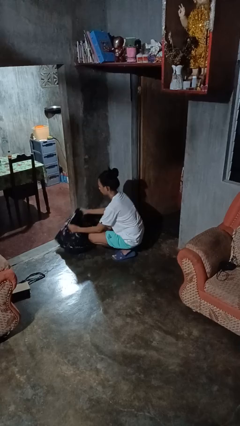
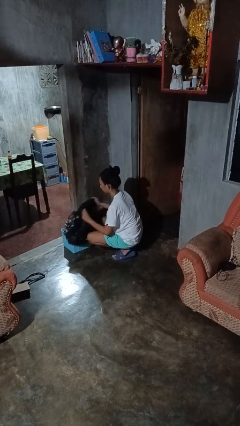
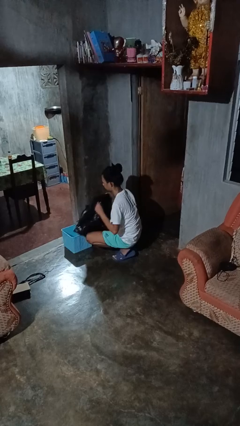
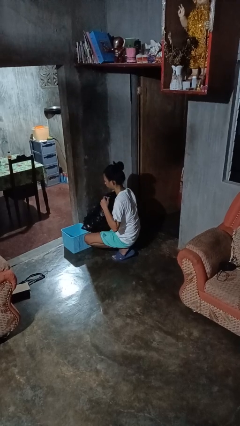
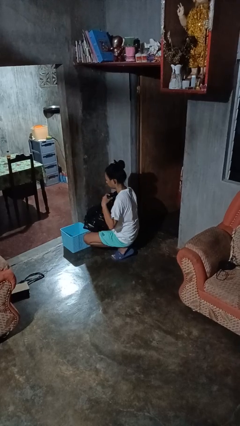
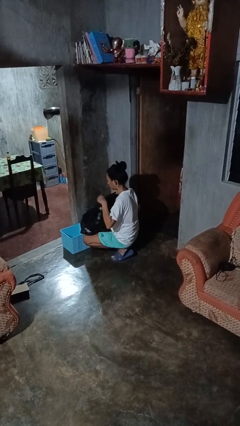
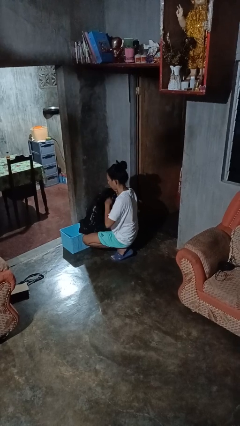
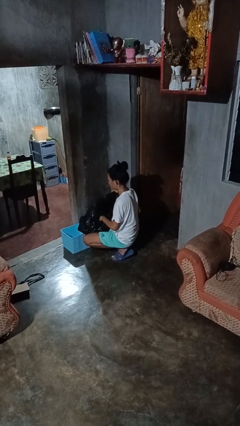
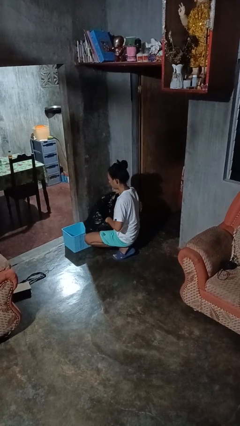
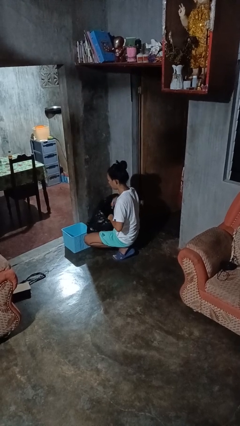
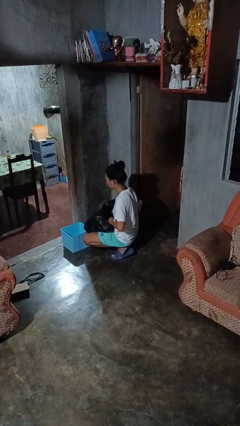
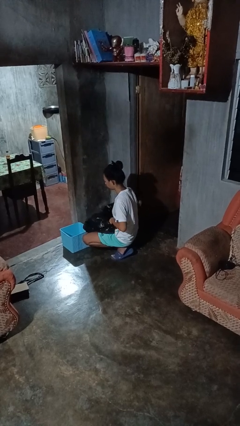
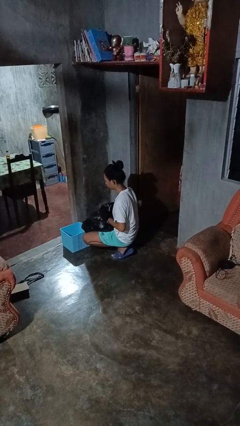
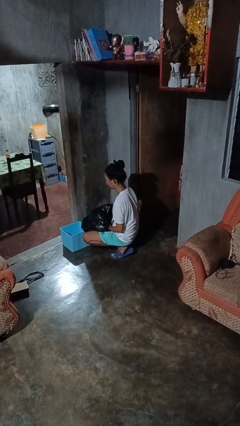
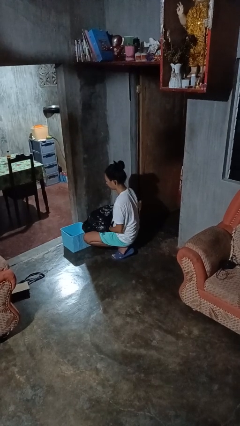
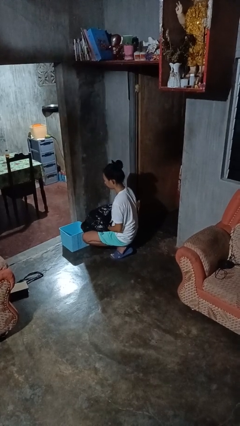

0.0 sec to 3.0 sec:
person removes trashbag from trashcan

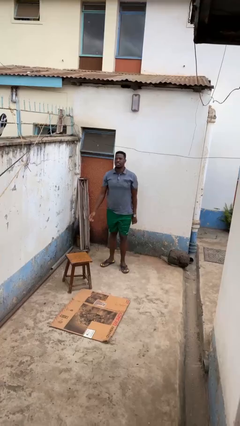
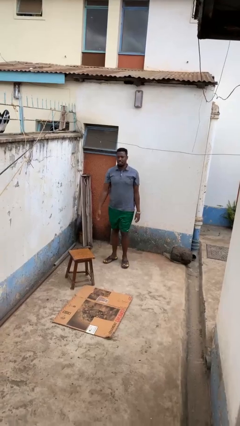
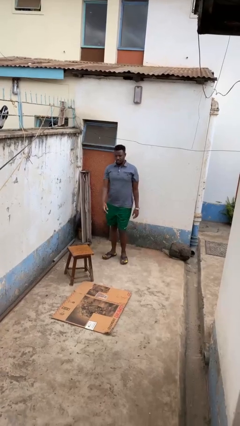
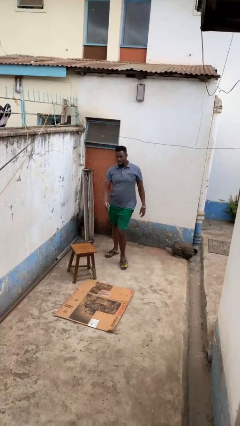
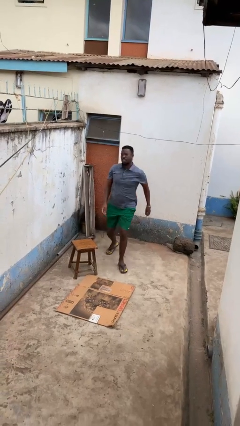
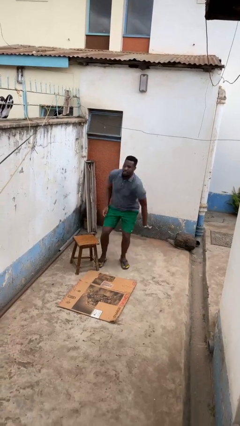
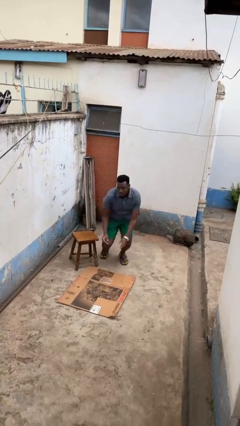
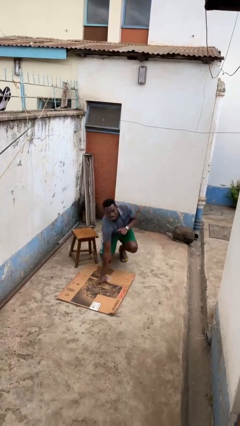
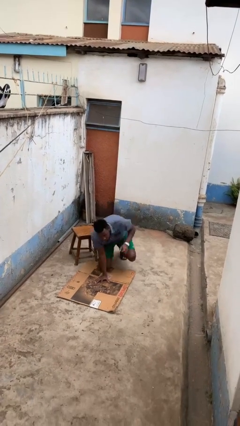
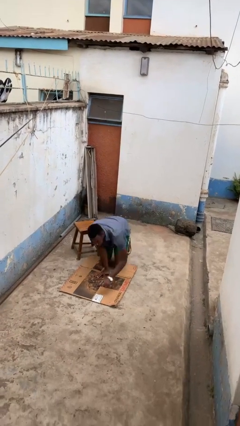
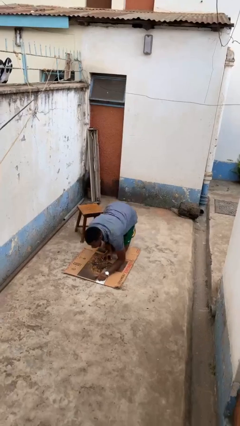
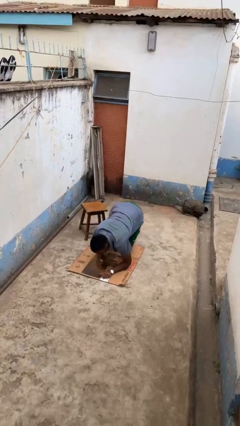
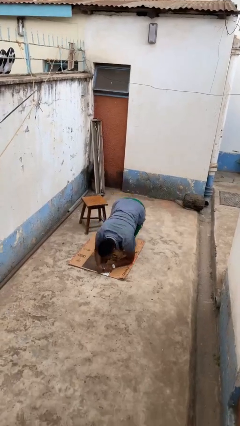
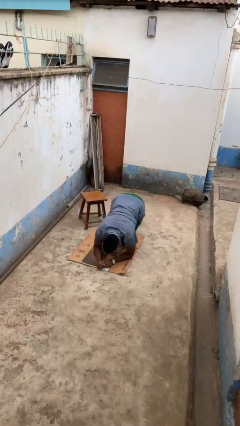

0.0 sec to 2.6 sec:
person trips on object on floor

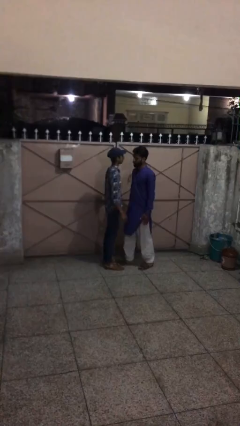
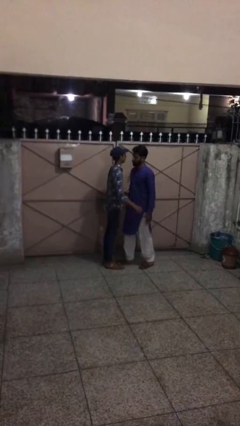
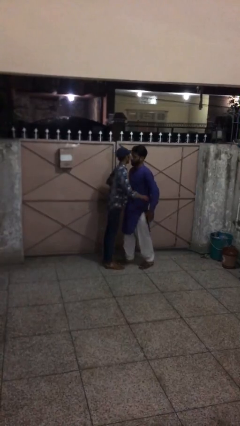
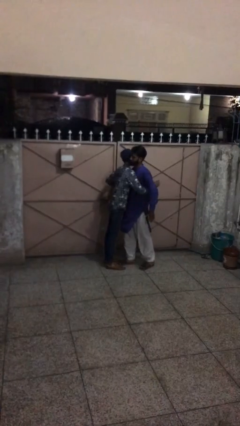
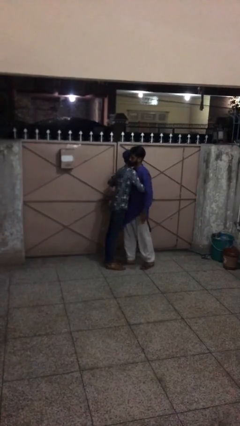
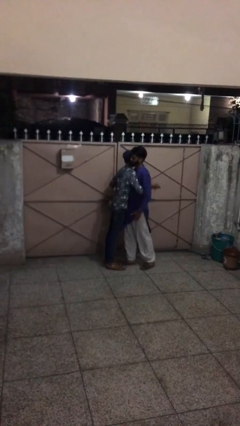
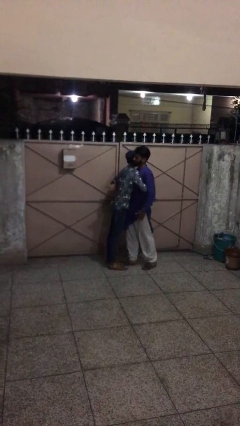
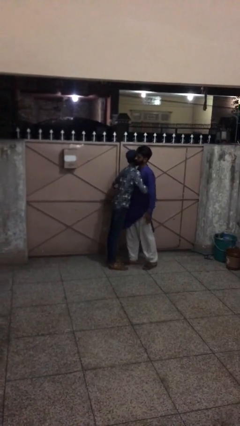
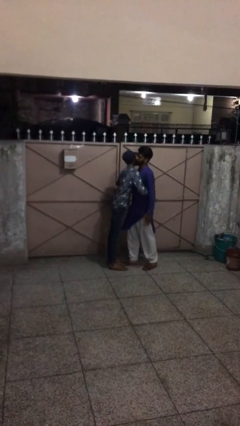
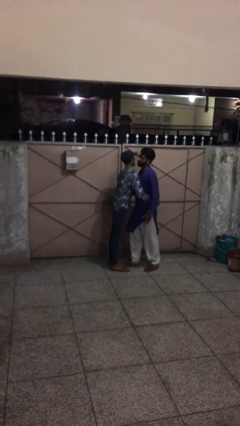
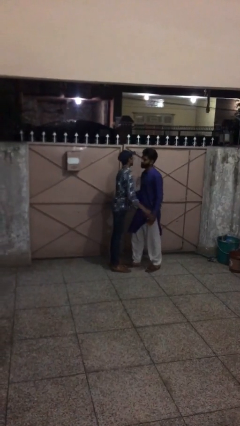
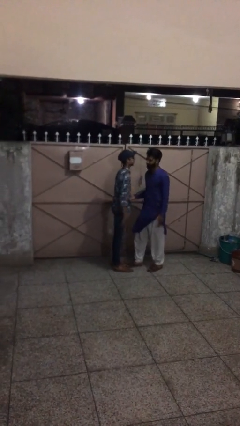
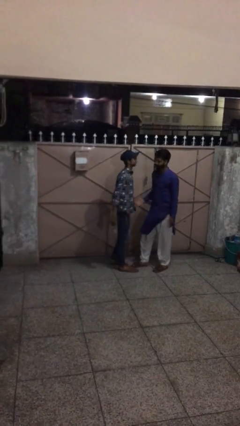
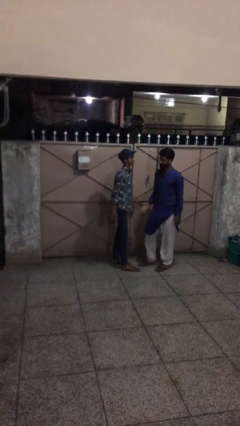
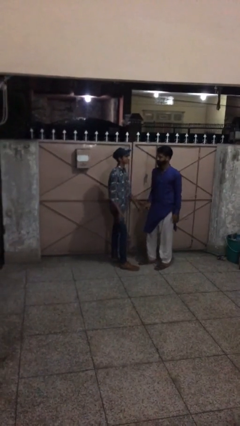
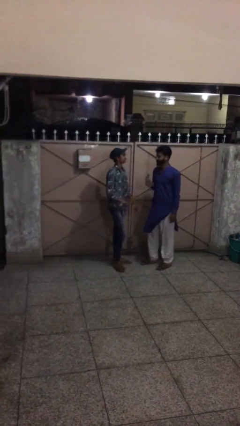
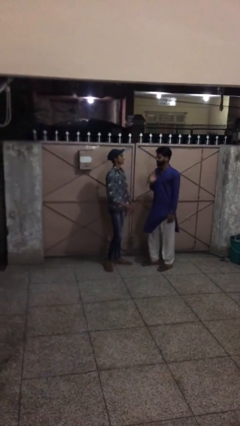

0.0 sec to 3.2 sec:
person embraces person

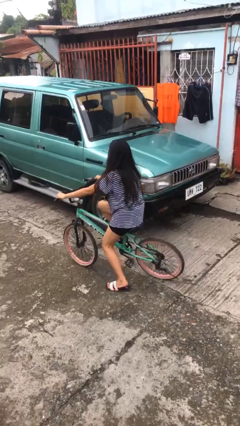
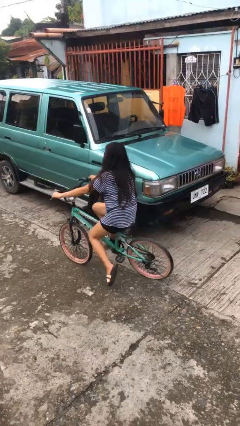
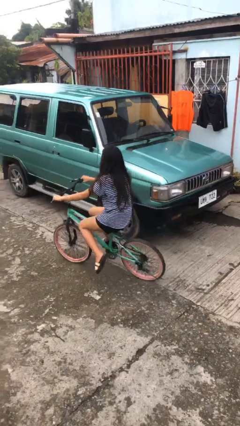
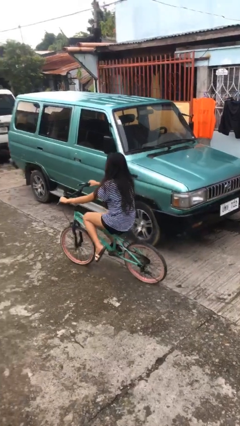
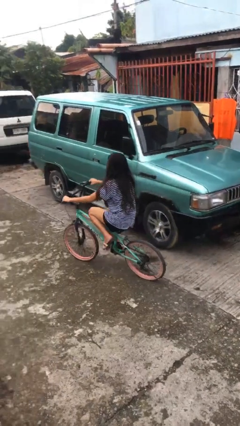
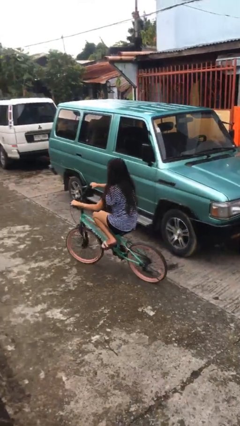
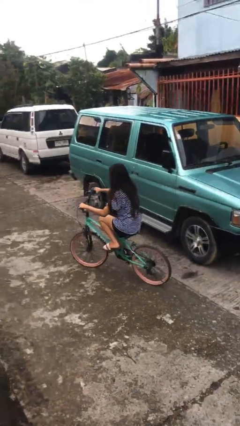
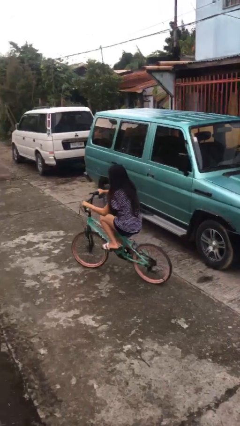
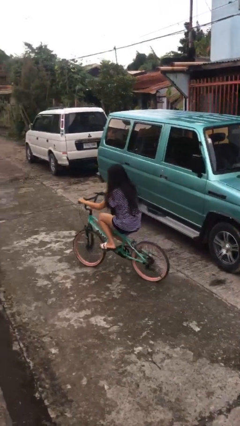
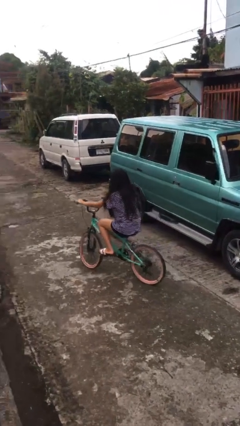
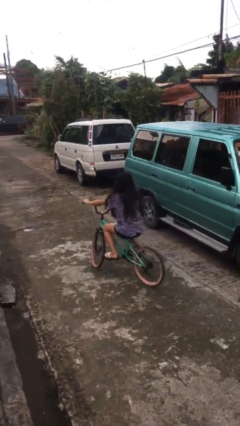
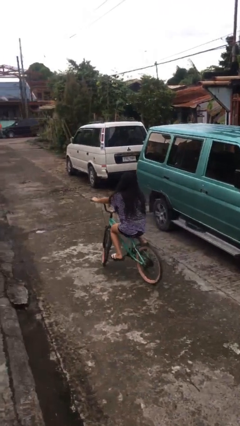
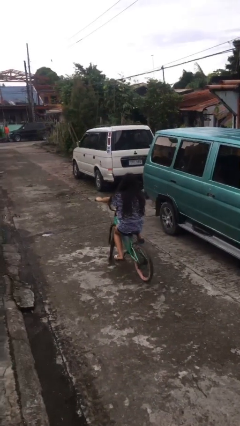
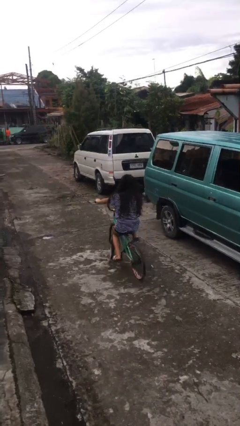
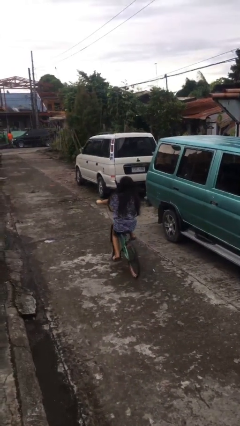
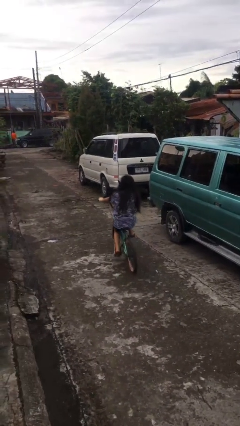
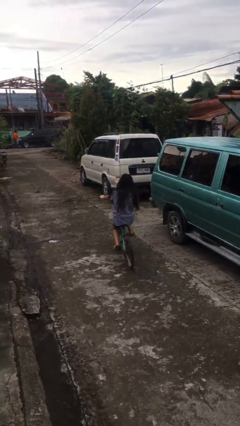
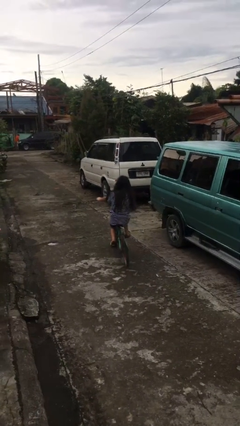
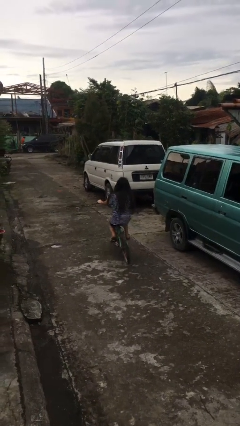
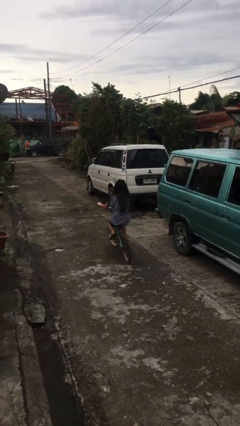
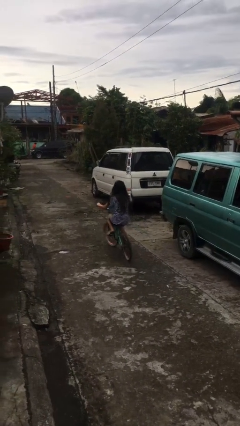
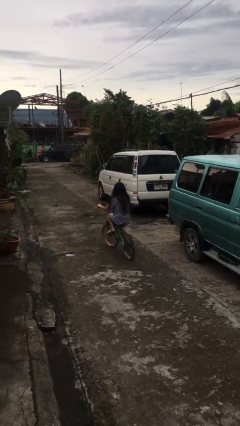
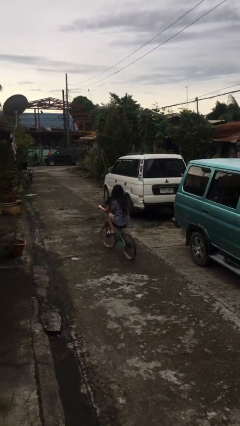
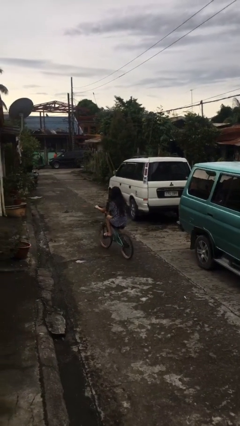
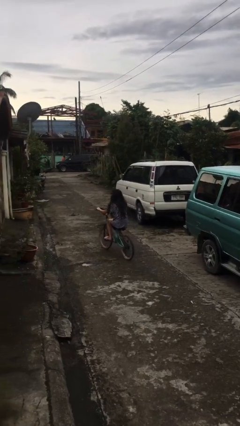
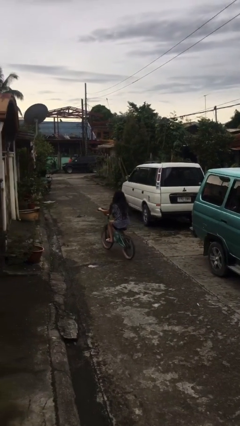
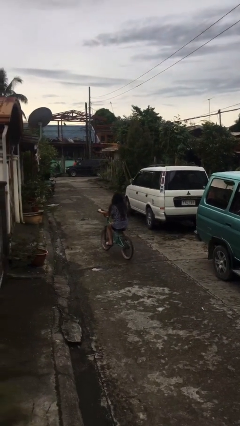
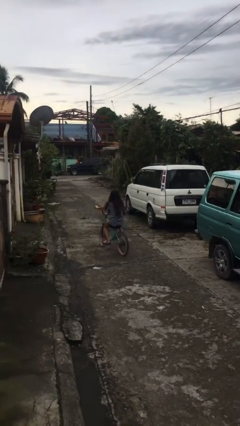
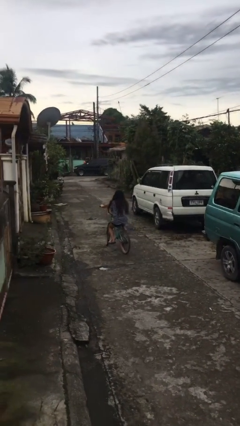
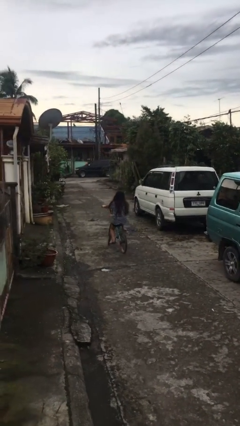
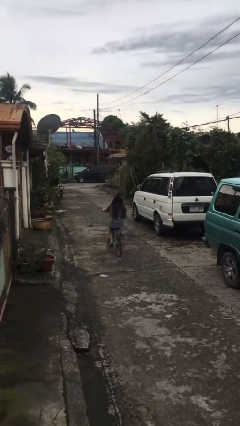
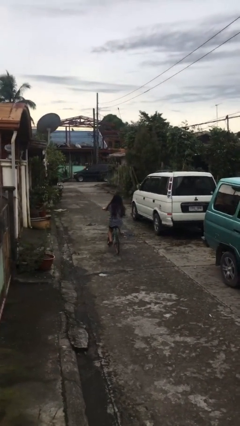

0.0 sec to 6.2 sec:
person rides bicycle

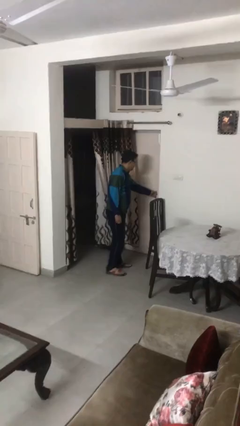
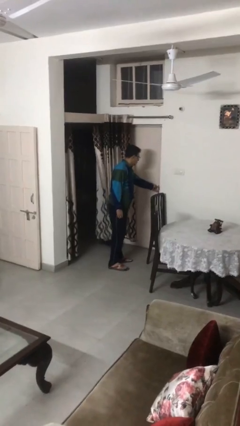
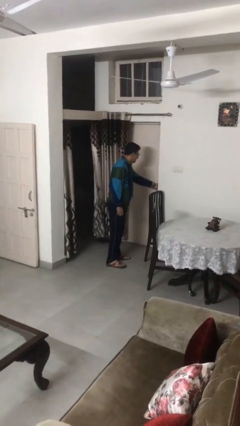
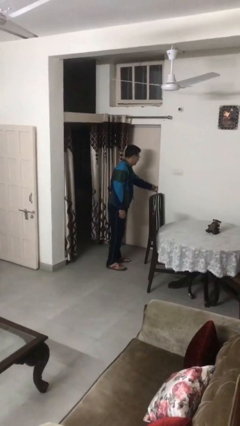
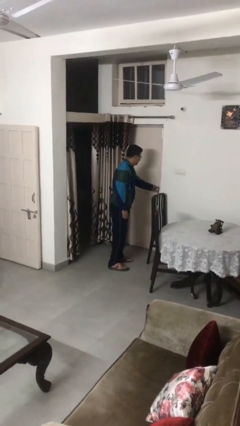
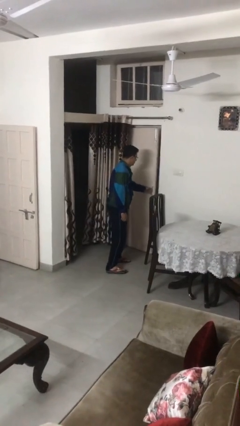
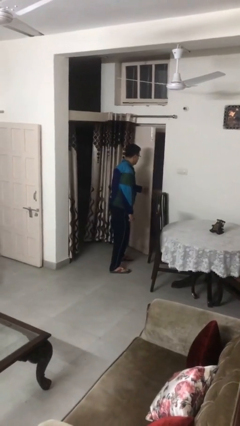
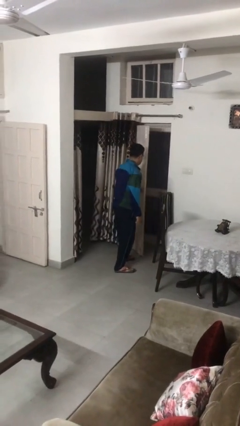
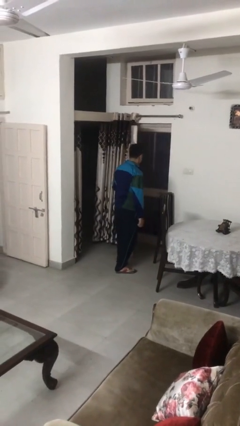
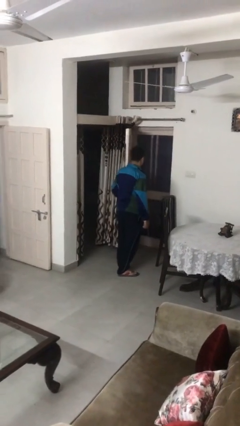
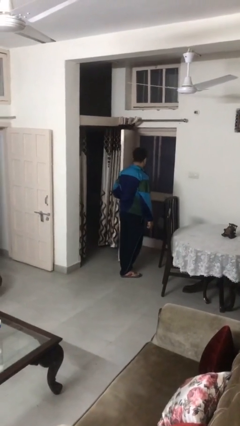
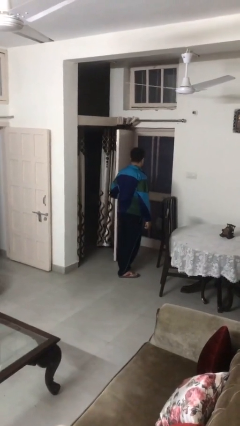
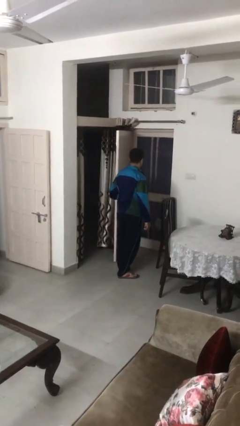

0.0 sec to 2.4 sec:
person opens facility door
